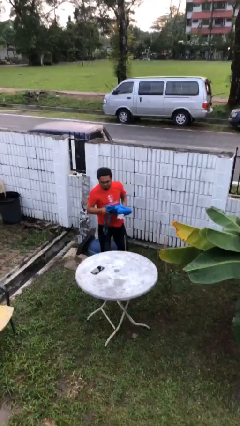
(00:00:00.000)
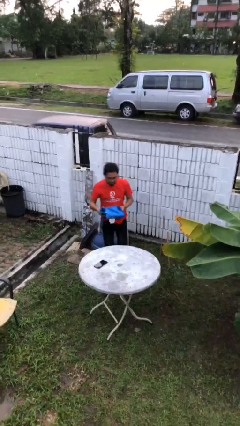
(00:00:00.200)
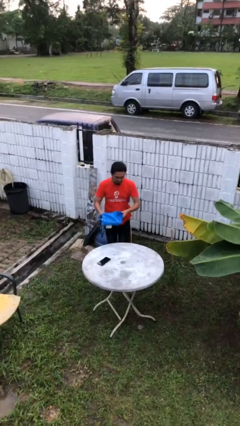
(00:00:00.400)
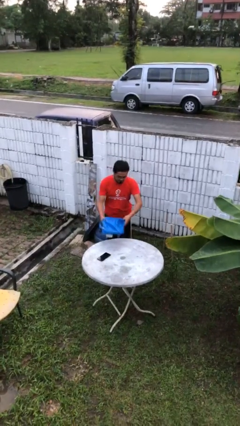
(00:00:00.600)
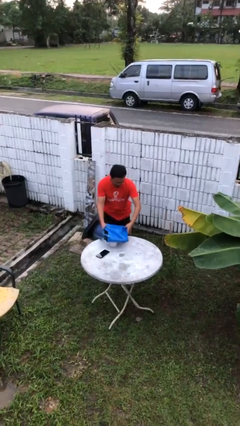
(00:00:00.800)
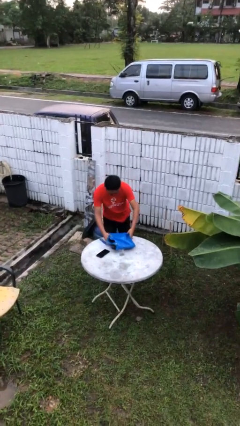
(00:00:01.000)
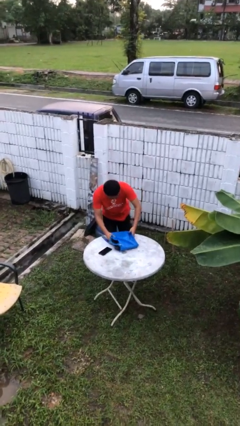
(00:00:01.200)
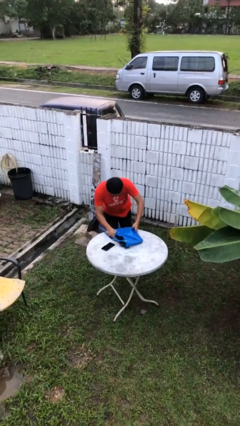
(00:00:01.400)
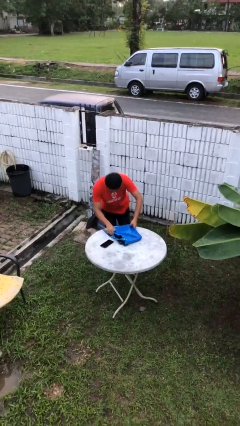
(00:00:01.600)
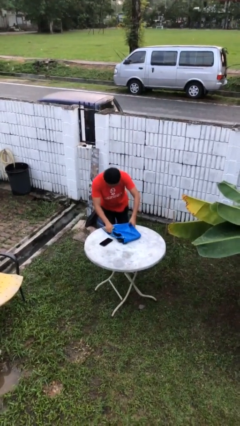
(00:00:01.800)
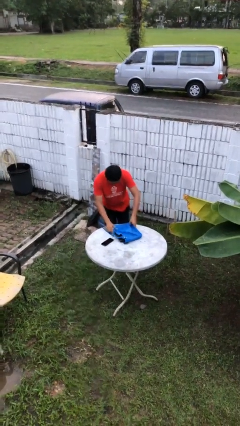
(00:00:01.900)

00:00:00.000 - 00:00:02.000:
person puts down object on table

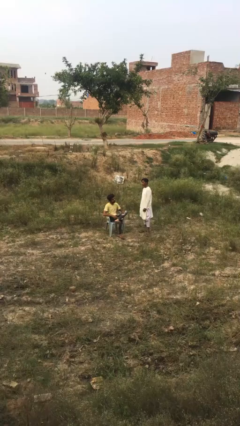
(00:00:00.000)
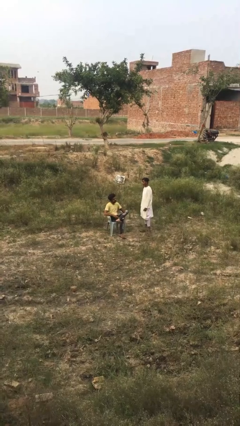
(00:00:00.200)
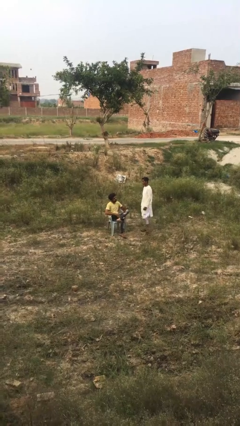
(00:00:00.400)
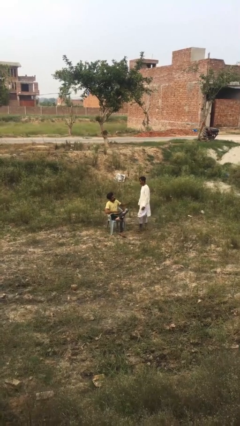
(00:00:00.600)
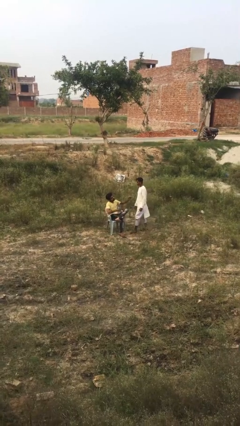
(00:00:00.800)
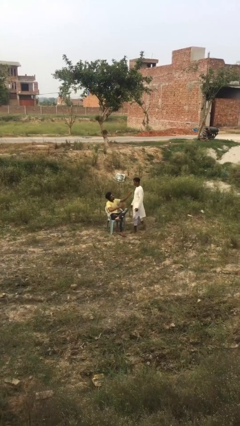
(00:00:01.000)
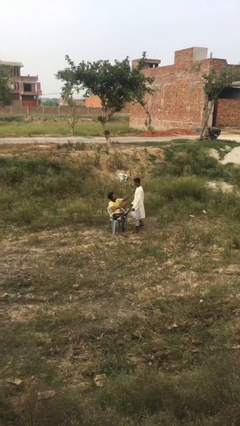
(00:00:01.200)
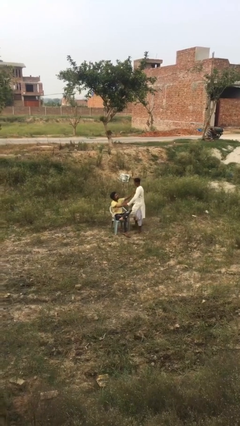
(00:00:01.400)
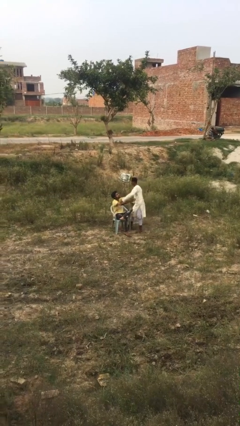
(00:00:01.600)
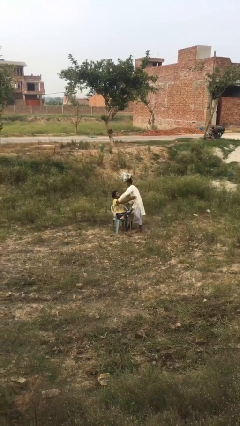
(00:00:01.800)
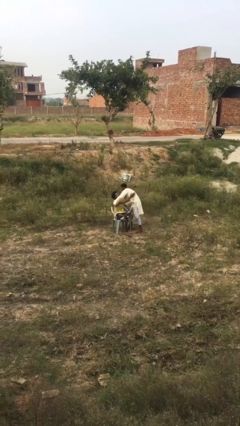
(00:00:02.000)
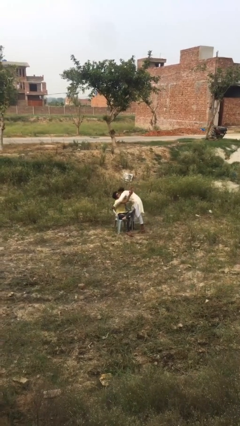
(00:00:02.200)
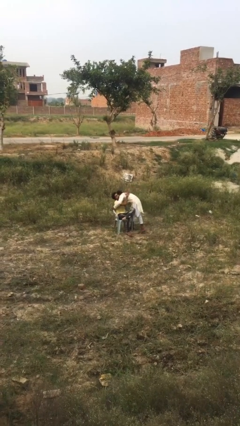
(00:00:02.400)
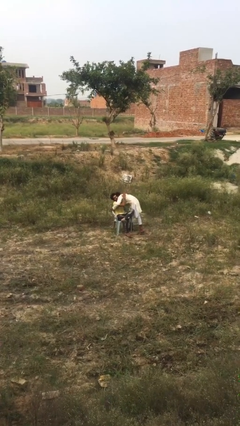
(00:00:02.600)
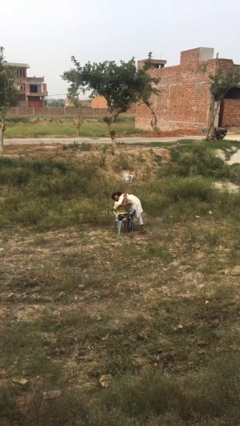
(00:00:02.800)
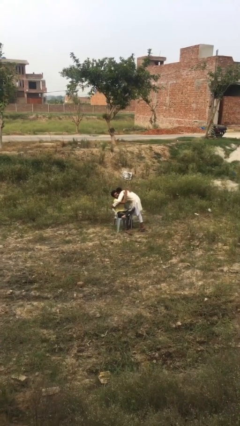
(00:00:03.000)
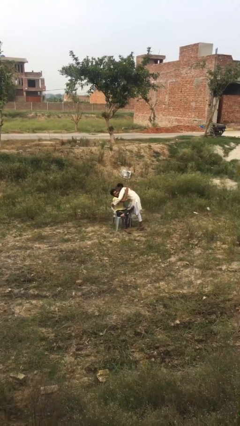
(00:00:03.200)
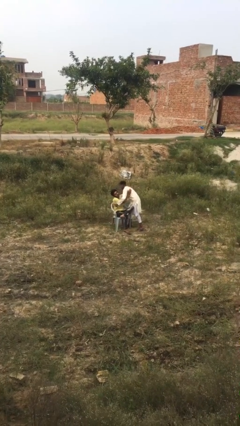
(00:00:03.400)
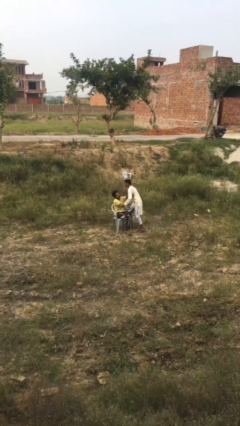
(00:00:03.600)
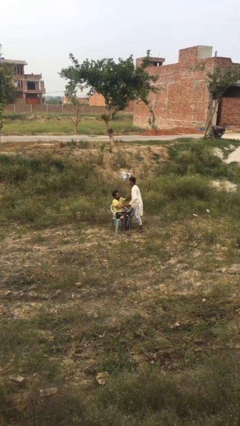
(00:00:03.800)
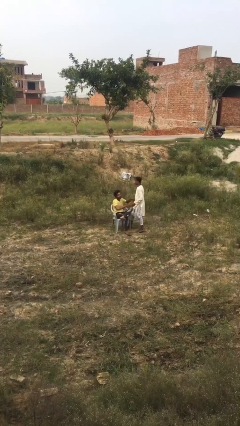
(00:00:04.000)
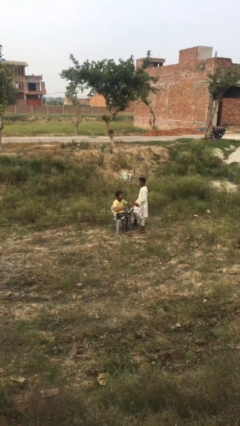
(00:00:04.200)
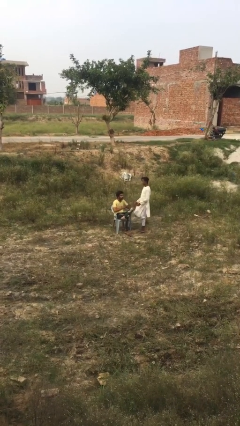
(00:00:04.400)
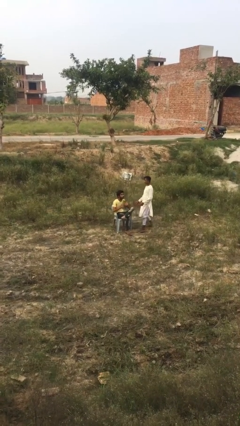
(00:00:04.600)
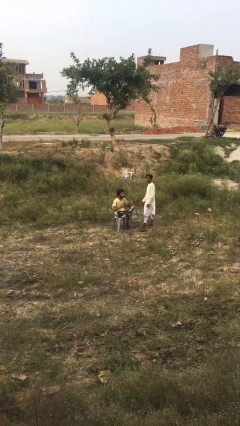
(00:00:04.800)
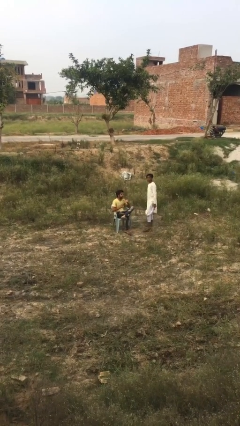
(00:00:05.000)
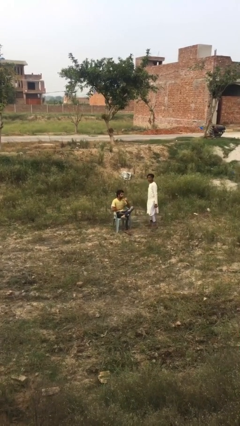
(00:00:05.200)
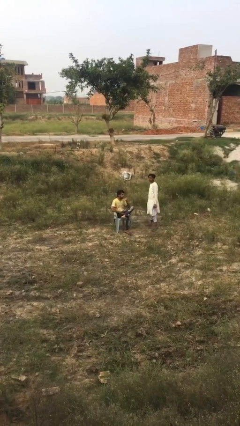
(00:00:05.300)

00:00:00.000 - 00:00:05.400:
person embraces person

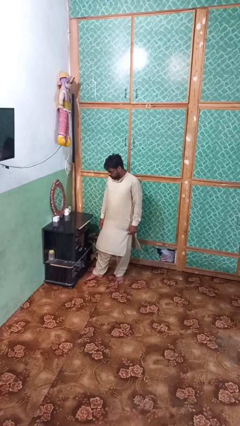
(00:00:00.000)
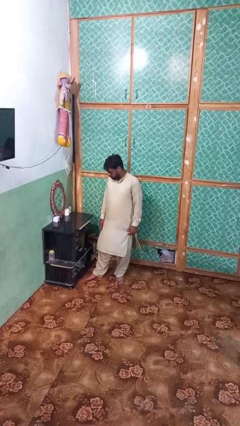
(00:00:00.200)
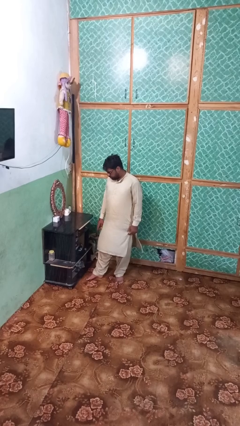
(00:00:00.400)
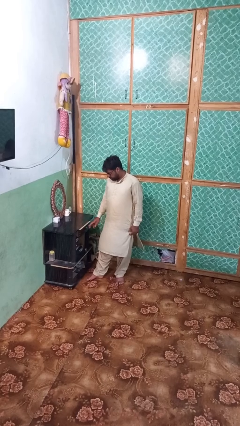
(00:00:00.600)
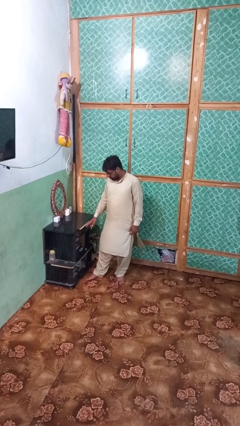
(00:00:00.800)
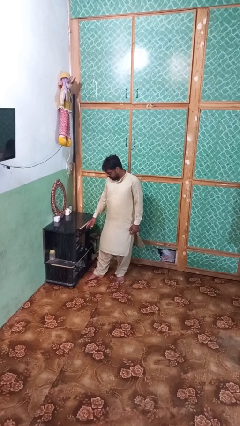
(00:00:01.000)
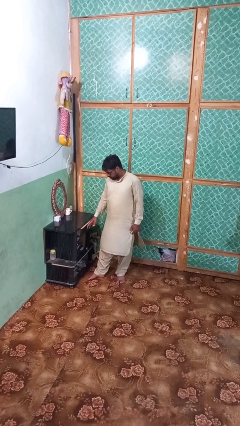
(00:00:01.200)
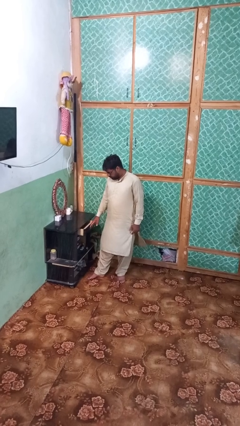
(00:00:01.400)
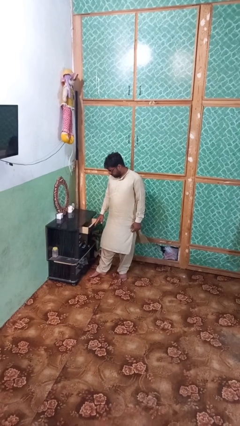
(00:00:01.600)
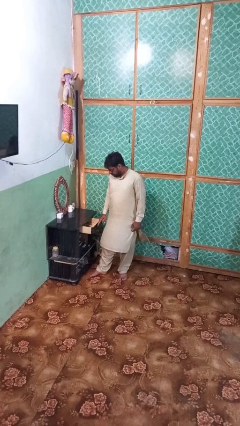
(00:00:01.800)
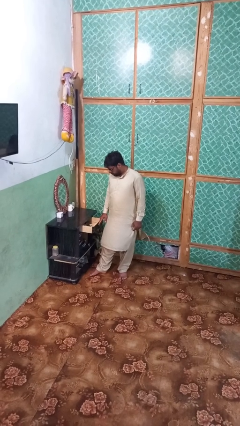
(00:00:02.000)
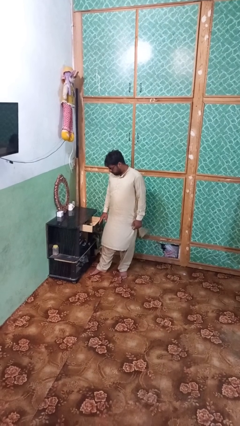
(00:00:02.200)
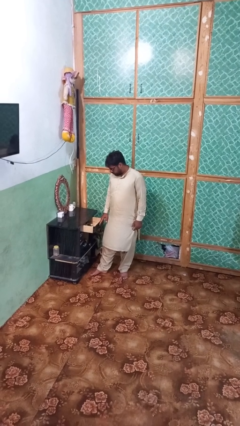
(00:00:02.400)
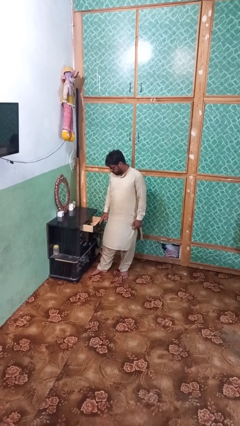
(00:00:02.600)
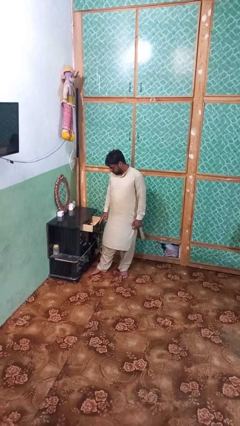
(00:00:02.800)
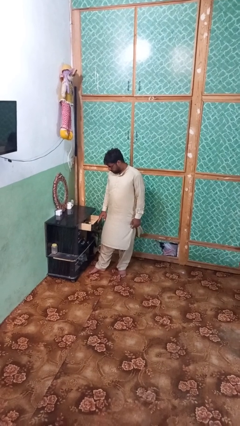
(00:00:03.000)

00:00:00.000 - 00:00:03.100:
person opens dresser drawer

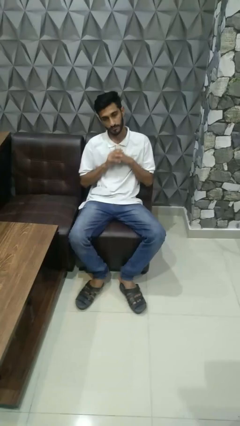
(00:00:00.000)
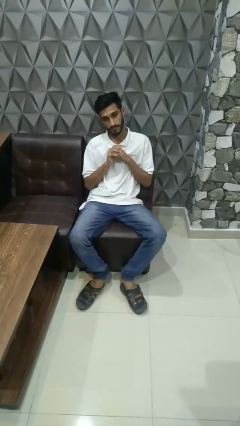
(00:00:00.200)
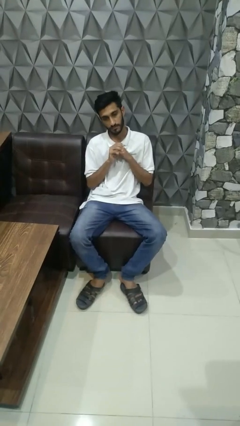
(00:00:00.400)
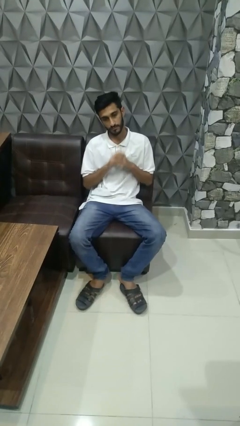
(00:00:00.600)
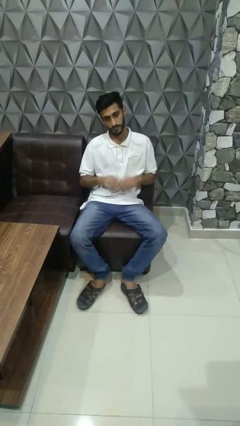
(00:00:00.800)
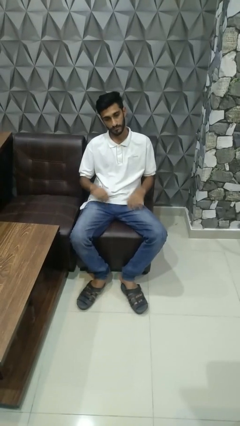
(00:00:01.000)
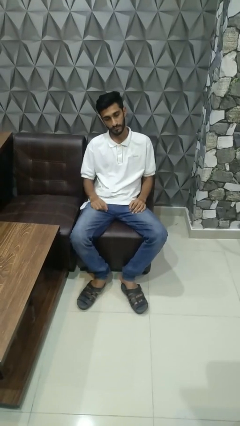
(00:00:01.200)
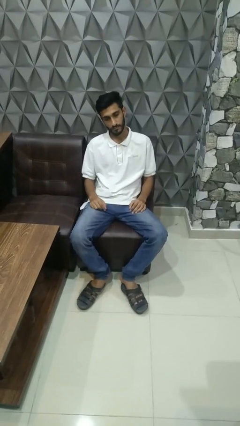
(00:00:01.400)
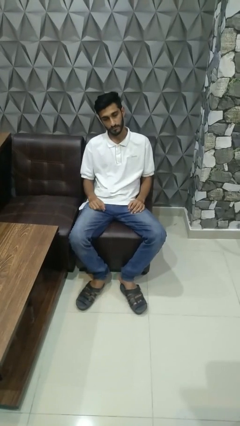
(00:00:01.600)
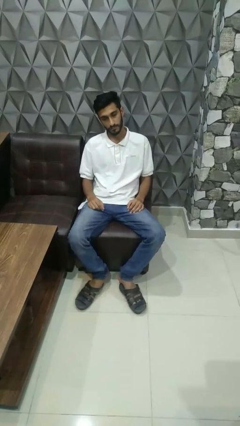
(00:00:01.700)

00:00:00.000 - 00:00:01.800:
person cracks knuckles

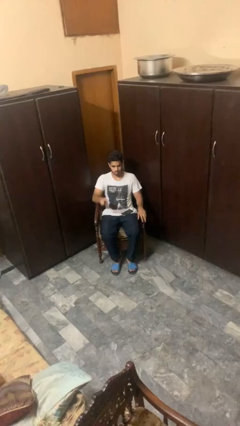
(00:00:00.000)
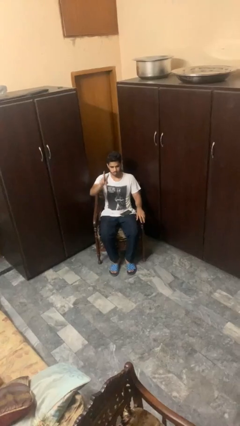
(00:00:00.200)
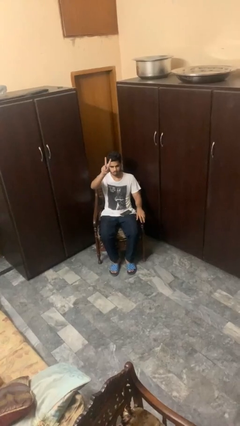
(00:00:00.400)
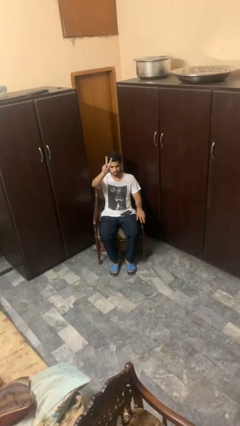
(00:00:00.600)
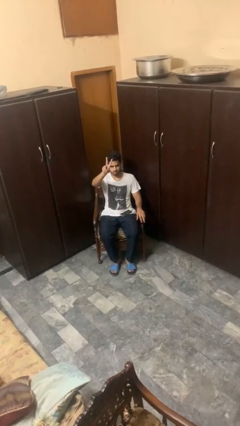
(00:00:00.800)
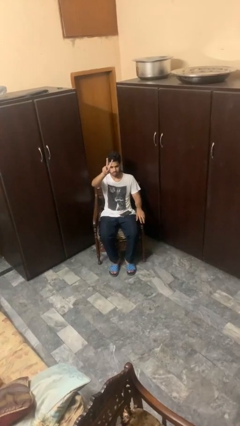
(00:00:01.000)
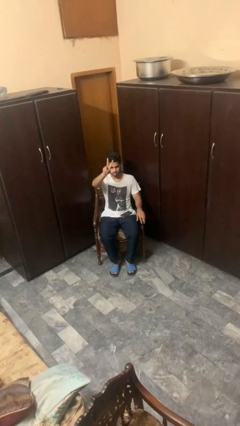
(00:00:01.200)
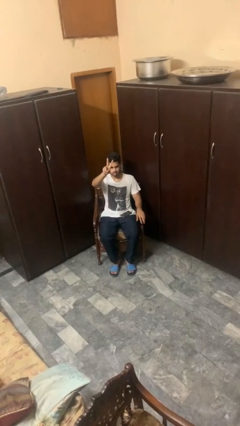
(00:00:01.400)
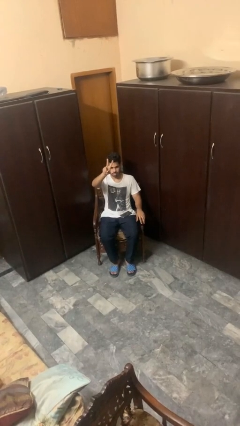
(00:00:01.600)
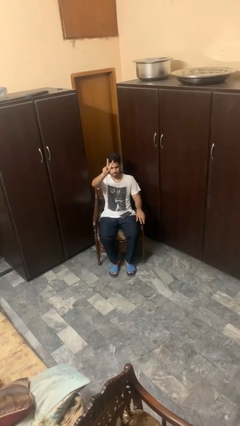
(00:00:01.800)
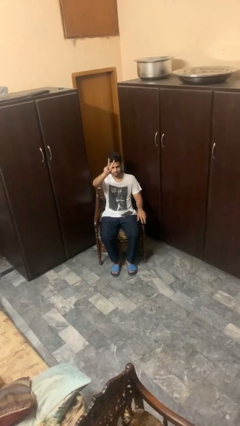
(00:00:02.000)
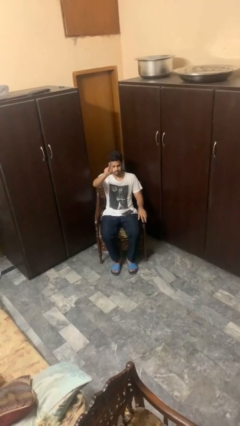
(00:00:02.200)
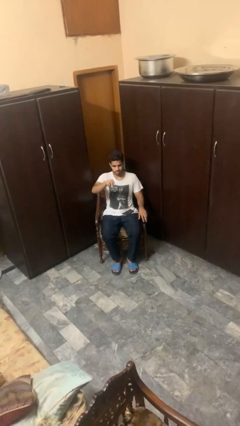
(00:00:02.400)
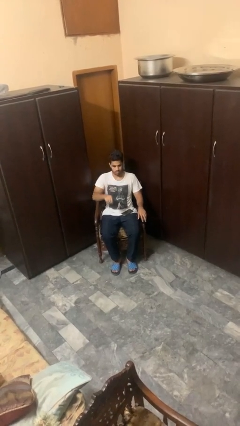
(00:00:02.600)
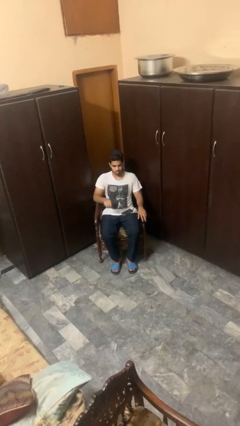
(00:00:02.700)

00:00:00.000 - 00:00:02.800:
person gestures peace

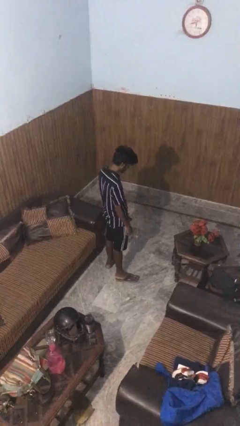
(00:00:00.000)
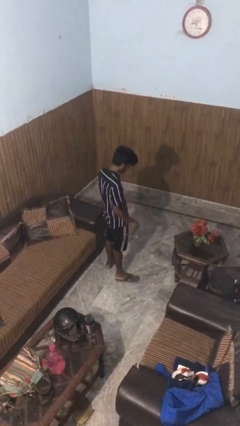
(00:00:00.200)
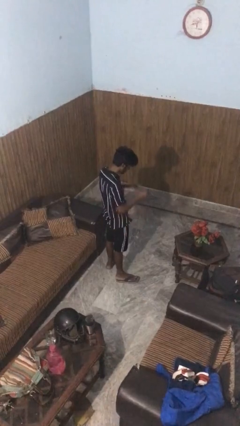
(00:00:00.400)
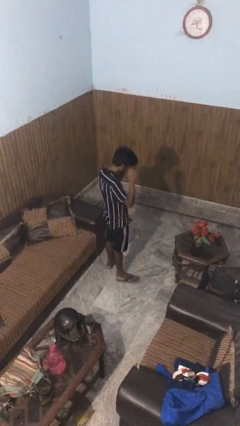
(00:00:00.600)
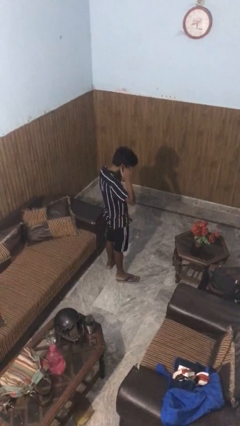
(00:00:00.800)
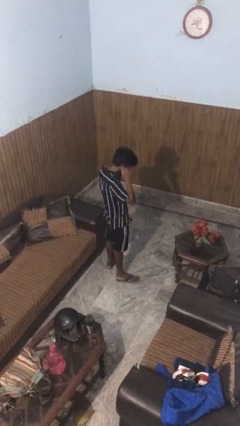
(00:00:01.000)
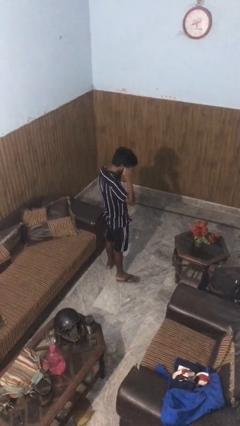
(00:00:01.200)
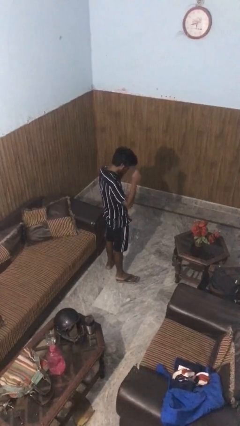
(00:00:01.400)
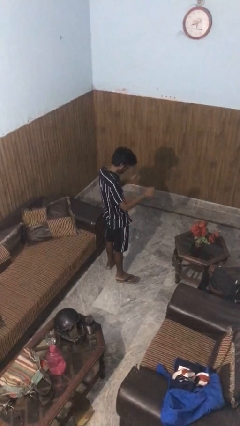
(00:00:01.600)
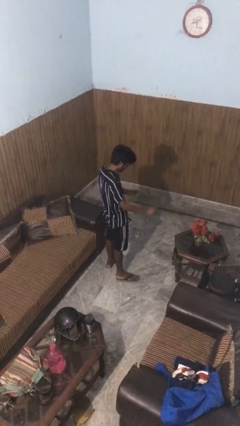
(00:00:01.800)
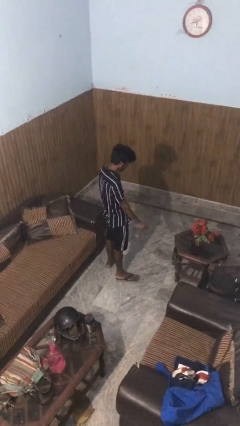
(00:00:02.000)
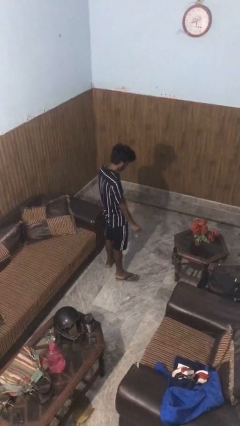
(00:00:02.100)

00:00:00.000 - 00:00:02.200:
person takes off headphones

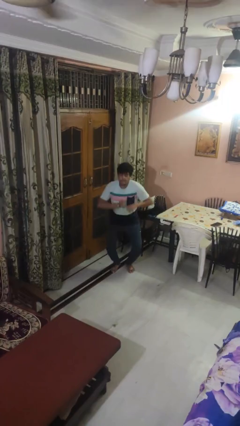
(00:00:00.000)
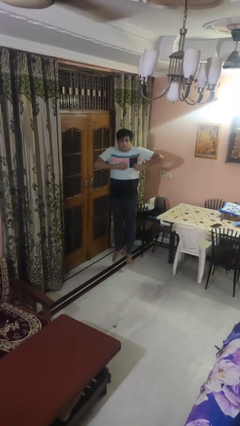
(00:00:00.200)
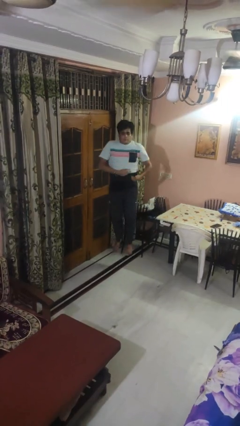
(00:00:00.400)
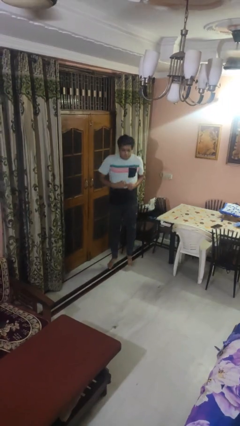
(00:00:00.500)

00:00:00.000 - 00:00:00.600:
person jumps
